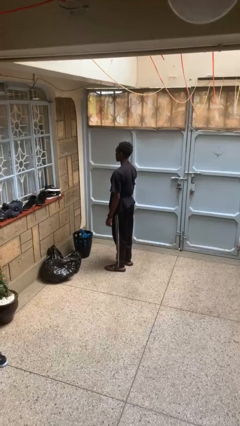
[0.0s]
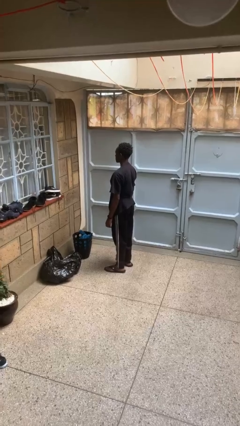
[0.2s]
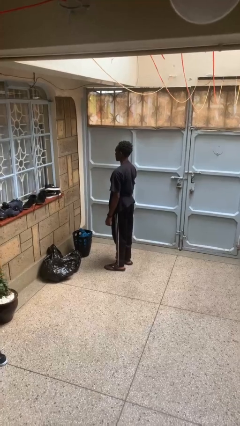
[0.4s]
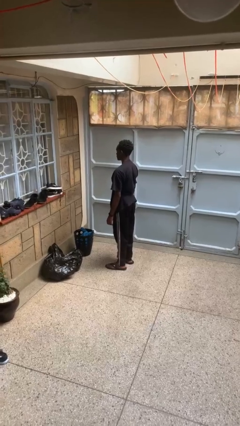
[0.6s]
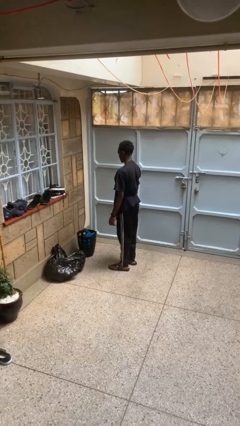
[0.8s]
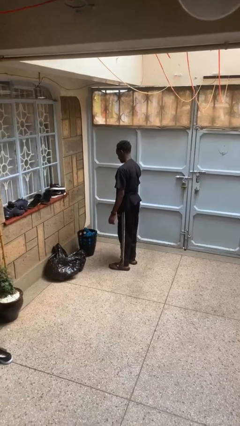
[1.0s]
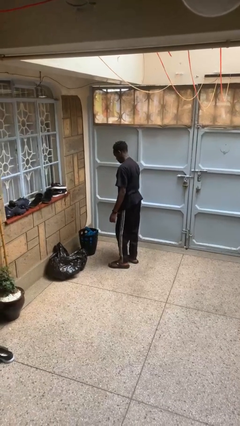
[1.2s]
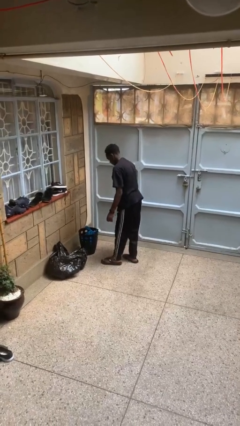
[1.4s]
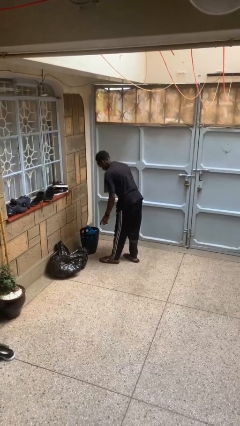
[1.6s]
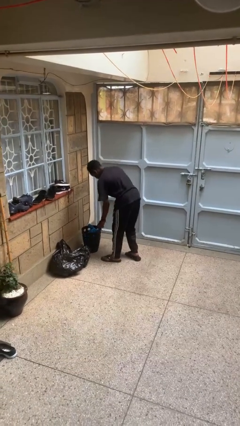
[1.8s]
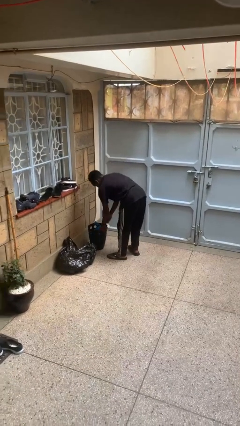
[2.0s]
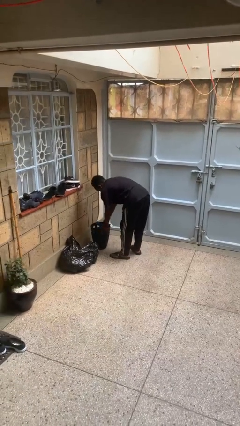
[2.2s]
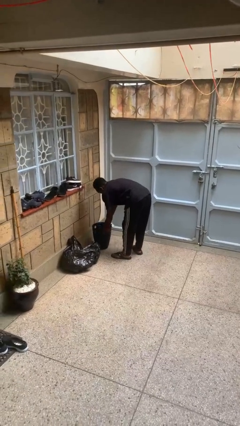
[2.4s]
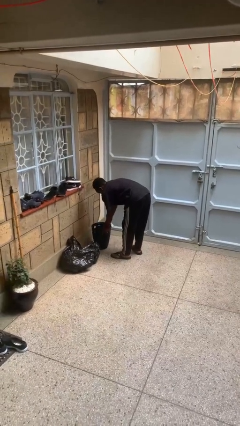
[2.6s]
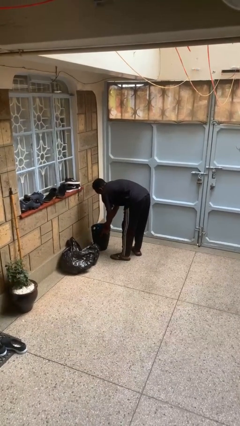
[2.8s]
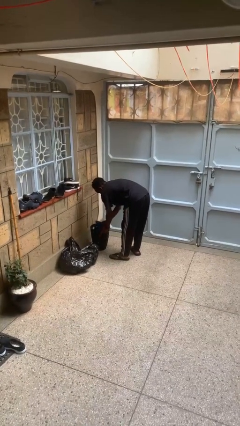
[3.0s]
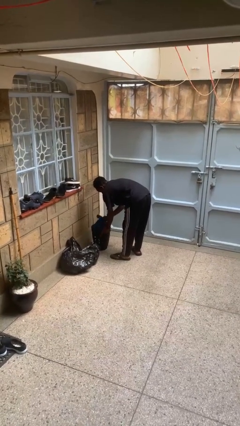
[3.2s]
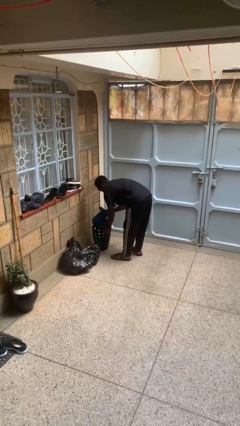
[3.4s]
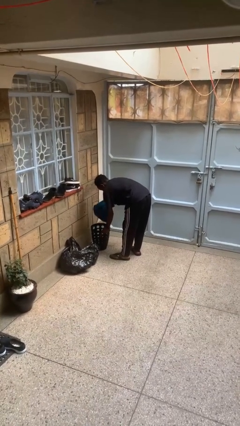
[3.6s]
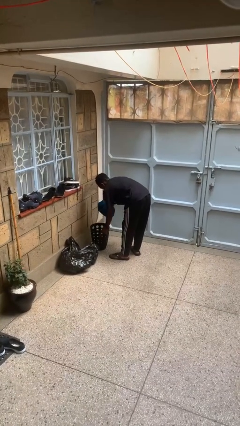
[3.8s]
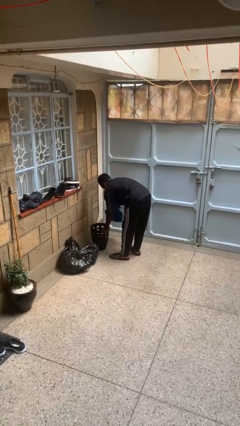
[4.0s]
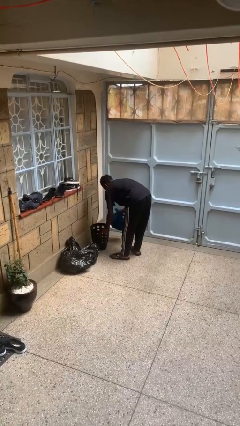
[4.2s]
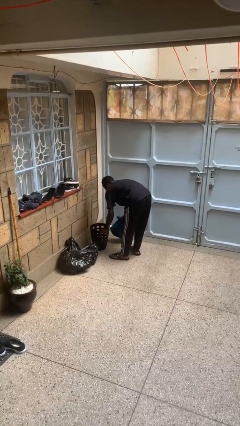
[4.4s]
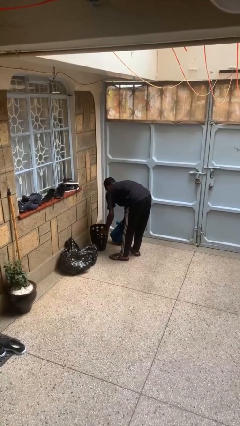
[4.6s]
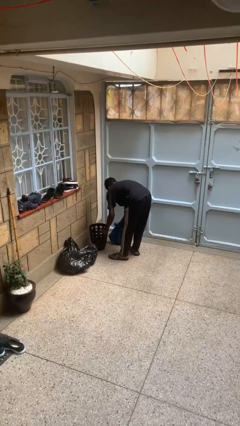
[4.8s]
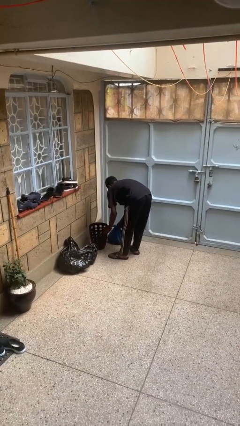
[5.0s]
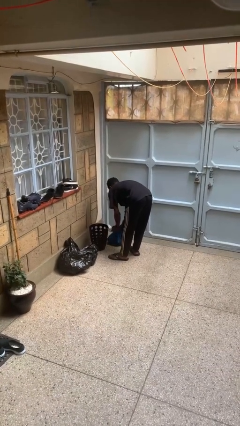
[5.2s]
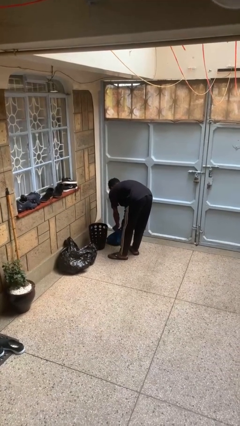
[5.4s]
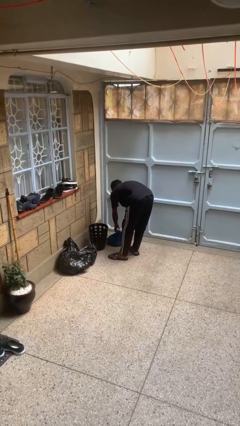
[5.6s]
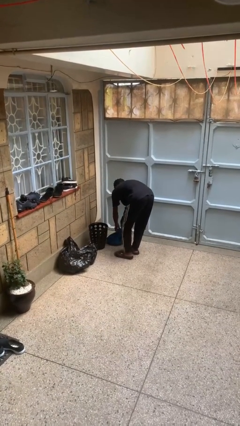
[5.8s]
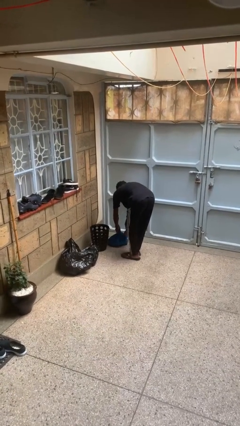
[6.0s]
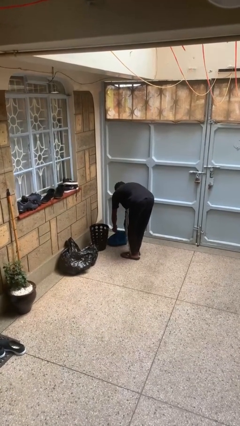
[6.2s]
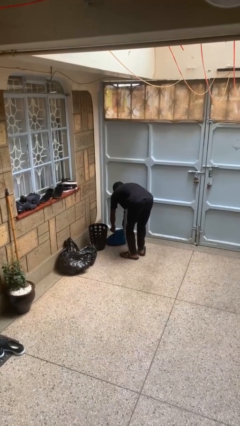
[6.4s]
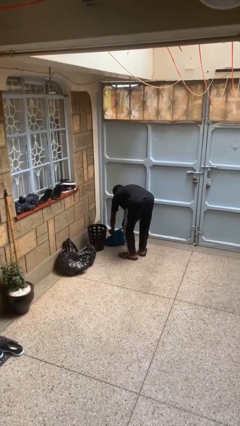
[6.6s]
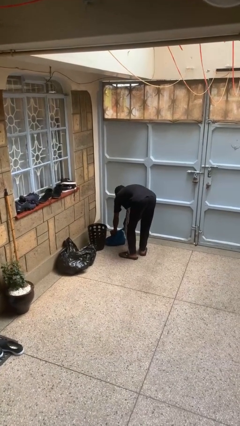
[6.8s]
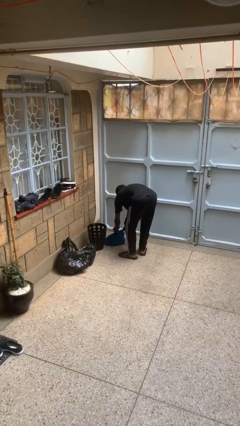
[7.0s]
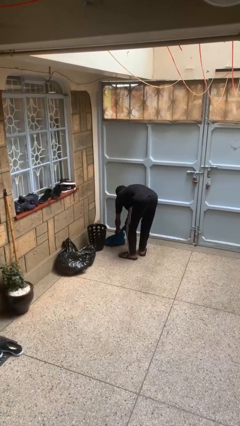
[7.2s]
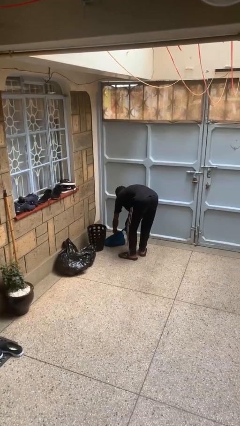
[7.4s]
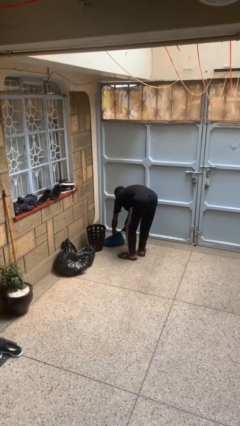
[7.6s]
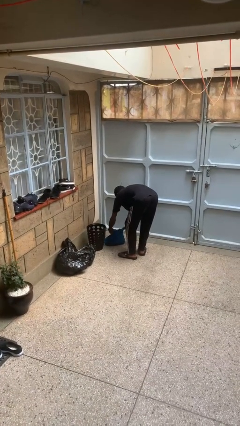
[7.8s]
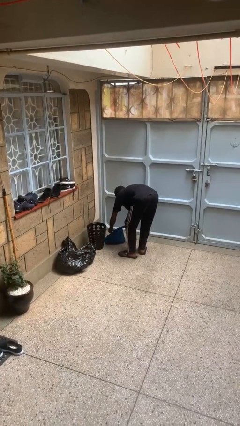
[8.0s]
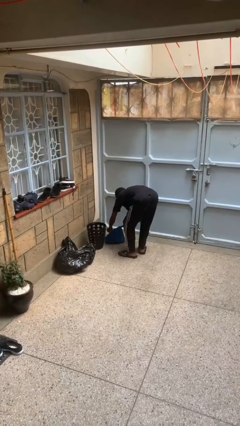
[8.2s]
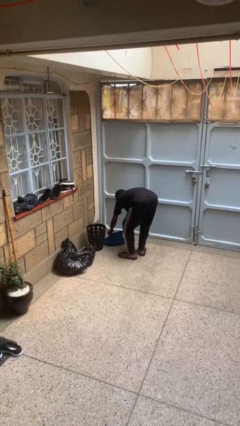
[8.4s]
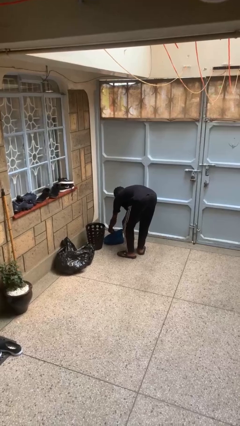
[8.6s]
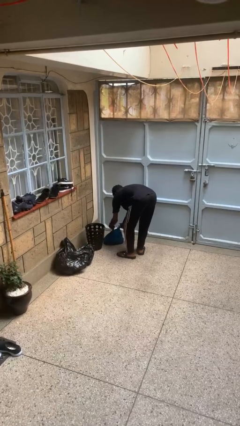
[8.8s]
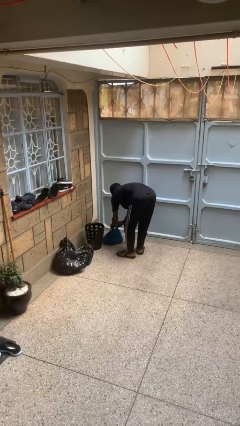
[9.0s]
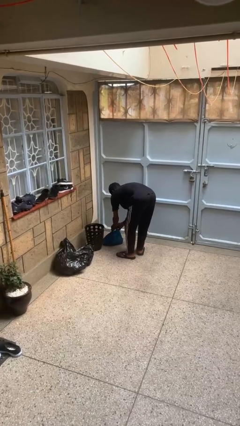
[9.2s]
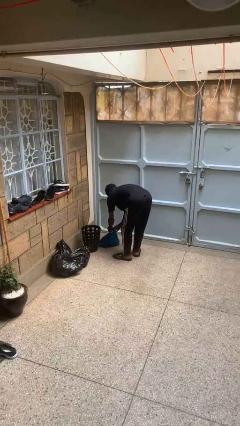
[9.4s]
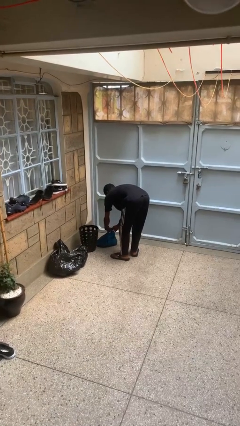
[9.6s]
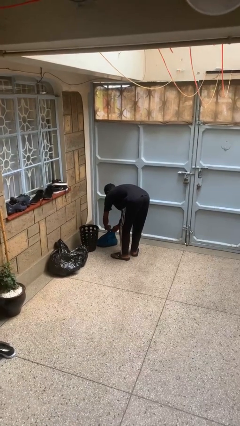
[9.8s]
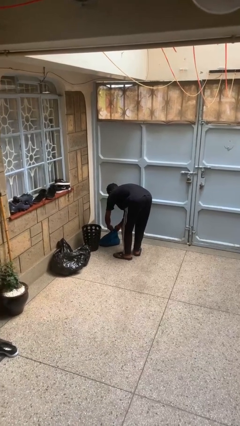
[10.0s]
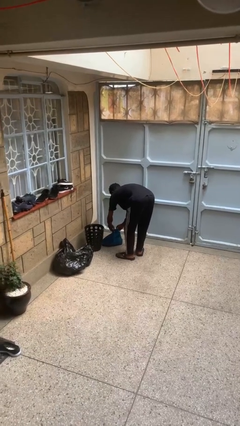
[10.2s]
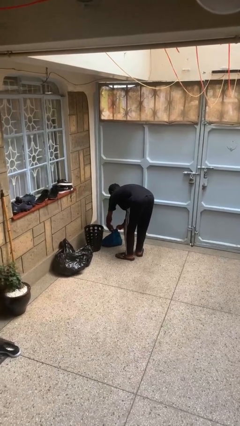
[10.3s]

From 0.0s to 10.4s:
person removes trashbag from trashcan

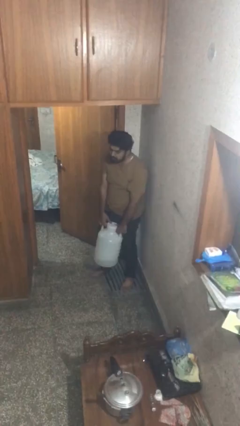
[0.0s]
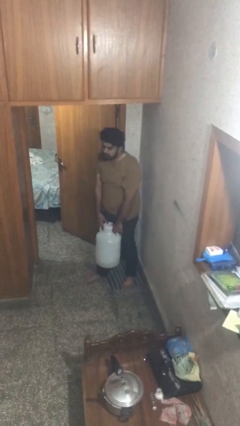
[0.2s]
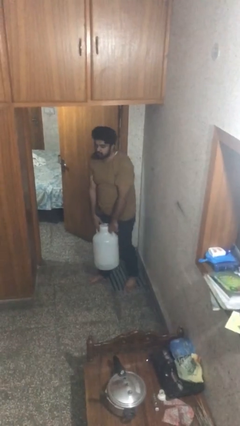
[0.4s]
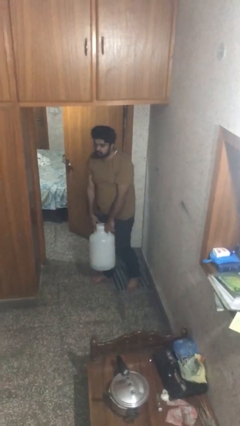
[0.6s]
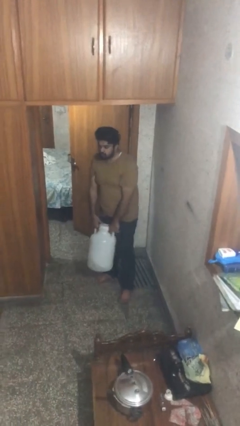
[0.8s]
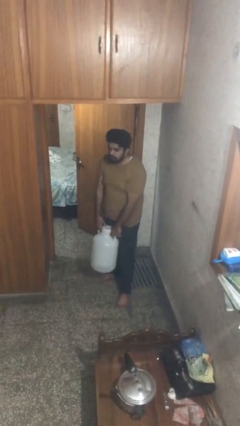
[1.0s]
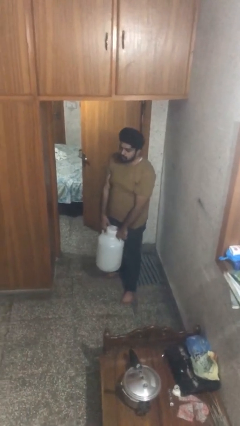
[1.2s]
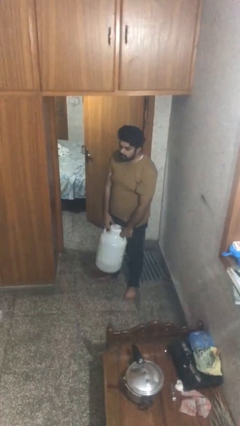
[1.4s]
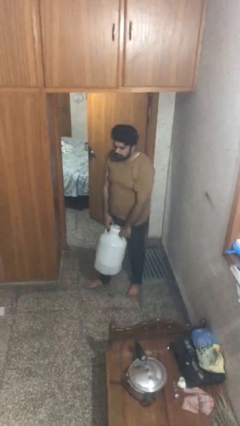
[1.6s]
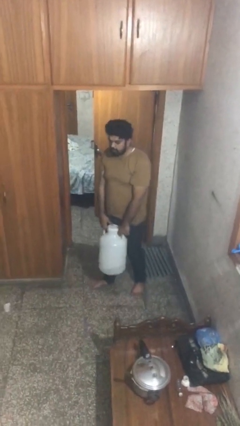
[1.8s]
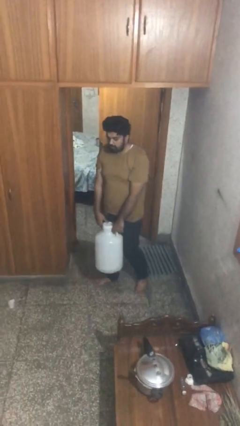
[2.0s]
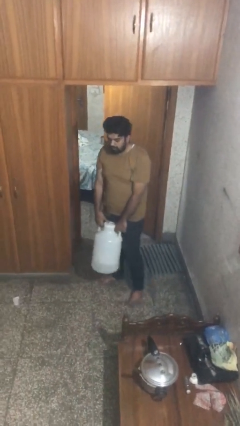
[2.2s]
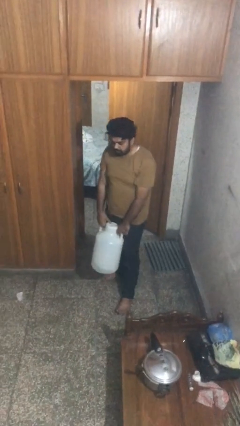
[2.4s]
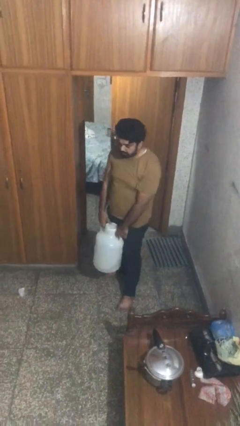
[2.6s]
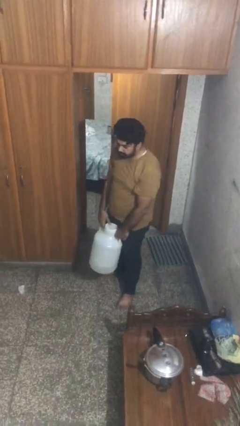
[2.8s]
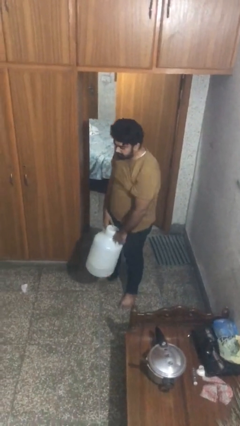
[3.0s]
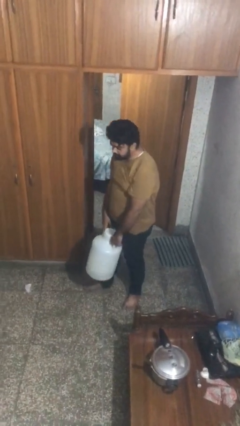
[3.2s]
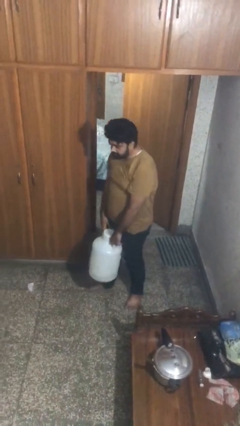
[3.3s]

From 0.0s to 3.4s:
person carries heavy object

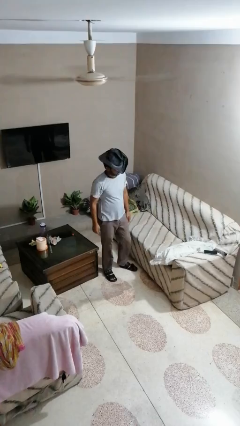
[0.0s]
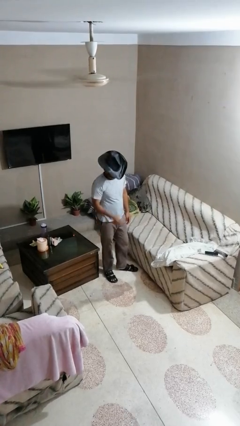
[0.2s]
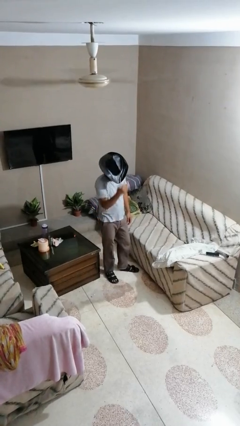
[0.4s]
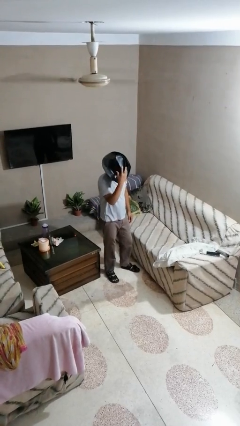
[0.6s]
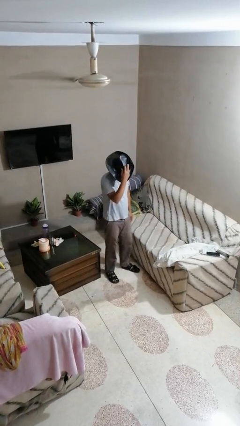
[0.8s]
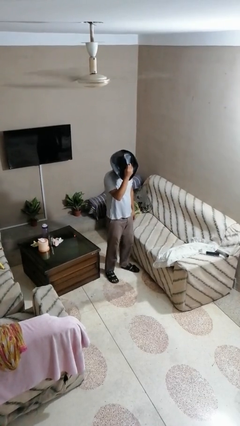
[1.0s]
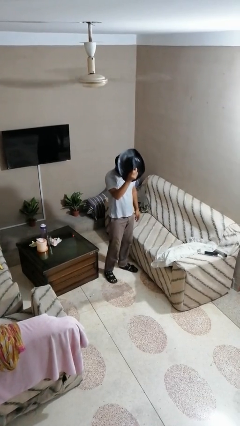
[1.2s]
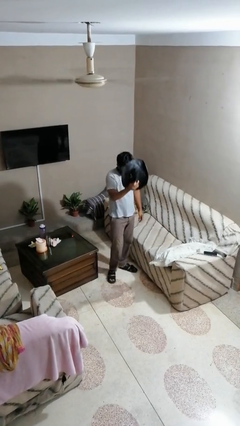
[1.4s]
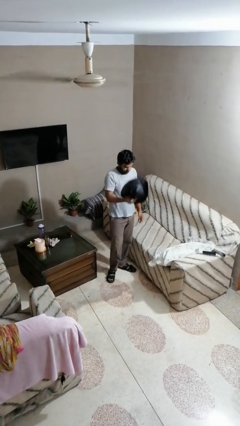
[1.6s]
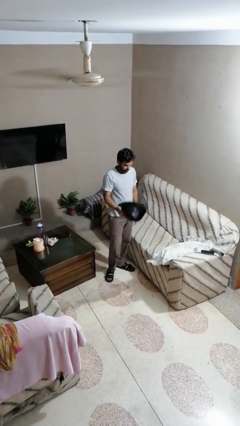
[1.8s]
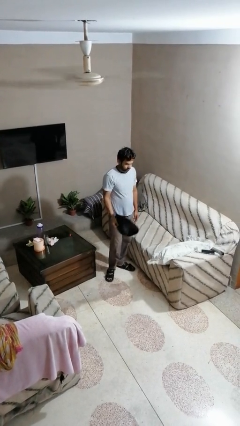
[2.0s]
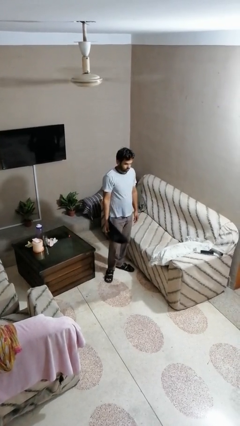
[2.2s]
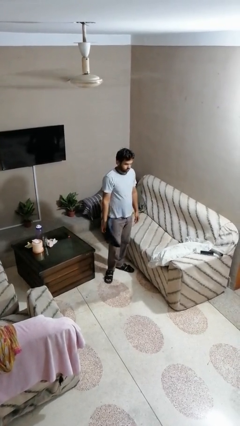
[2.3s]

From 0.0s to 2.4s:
person takes off hat

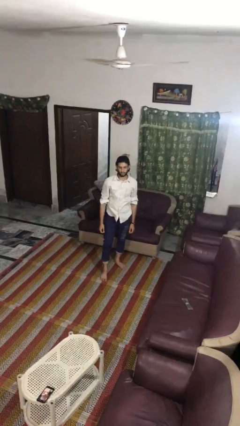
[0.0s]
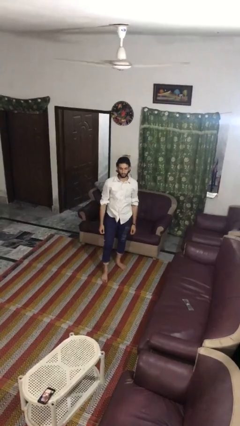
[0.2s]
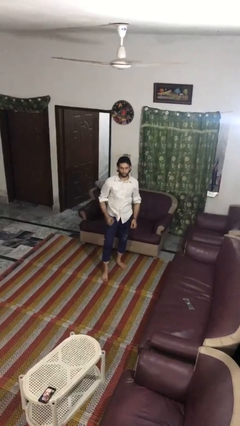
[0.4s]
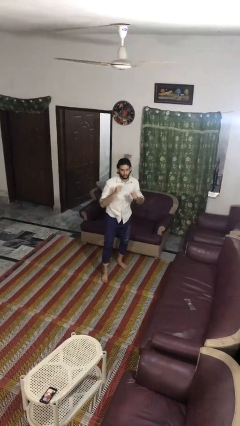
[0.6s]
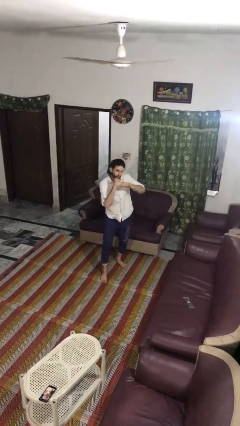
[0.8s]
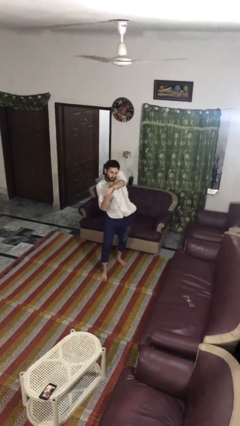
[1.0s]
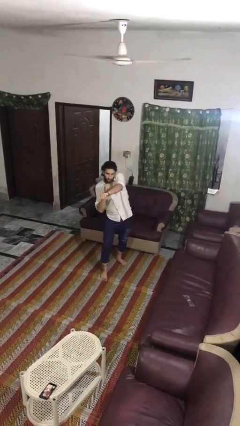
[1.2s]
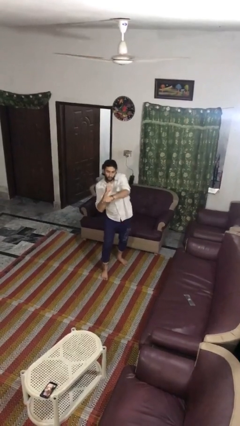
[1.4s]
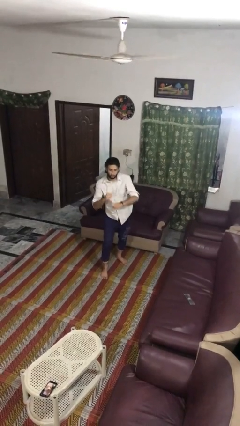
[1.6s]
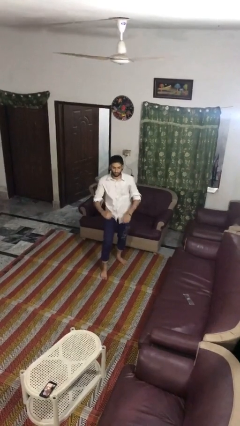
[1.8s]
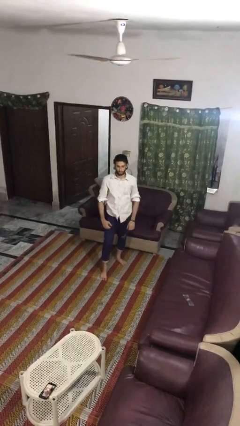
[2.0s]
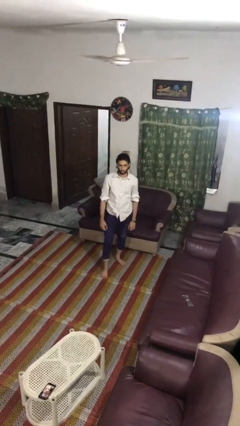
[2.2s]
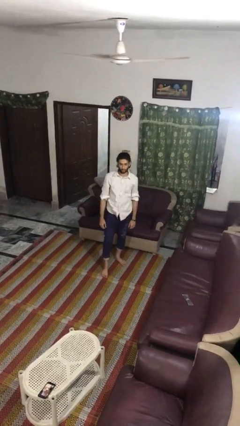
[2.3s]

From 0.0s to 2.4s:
person punches
